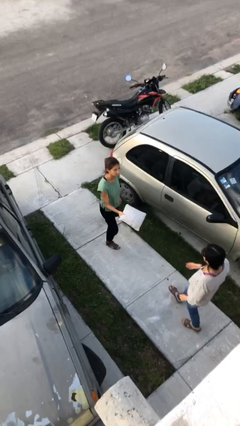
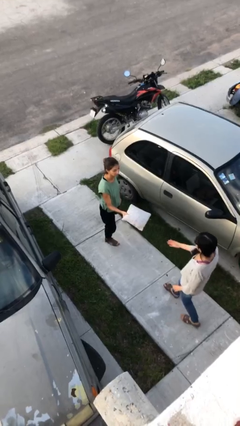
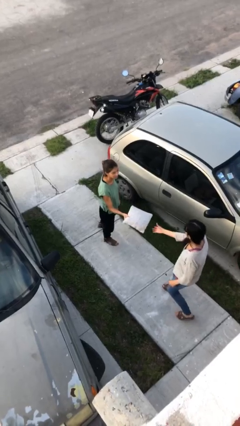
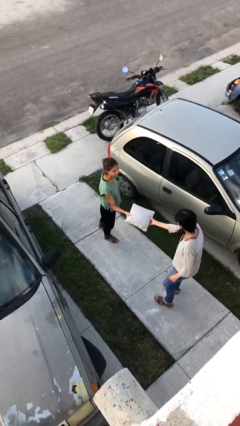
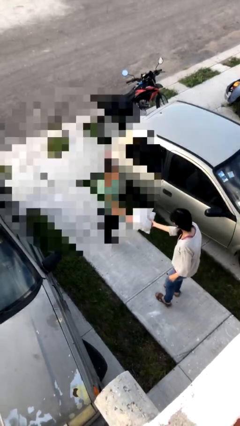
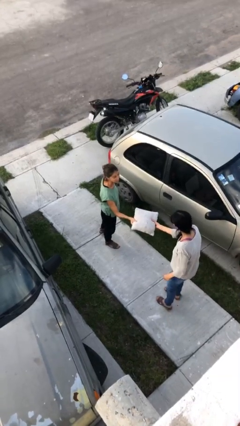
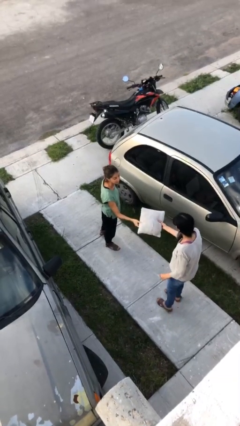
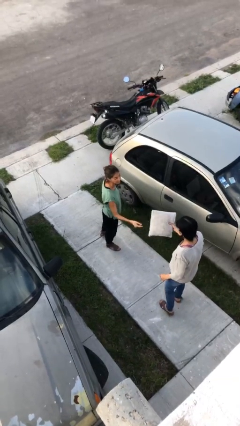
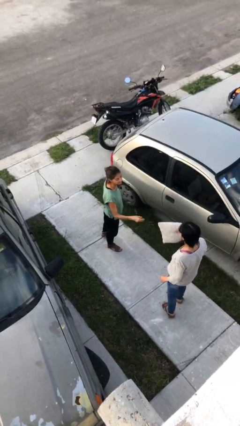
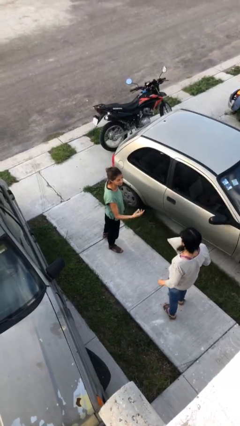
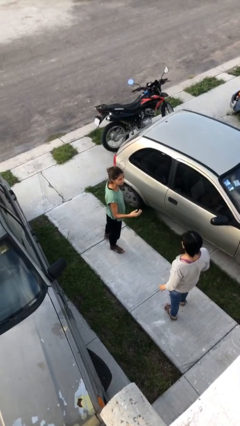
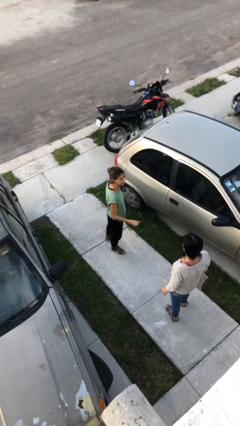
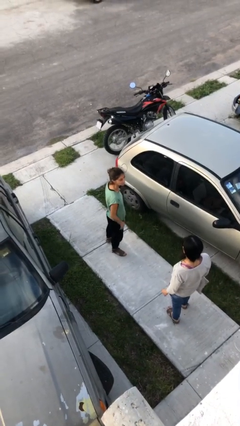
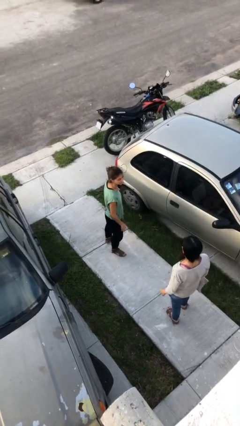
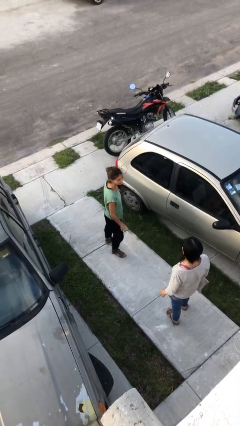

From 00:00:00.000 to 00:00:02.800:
person transfers object to person

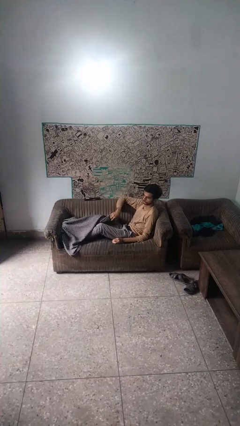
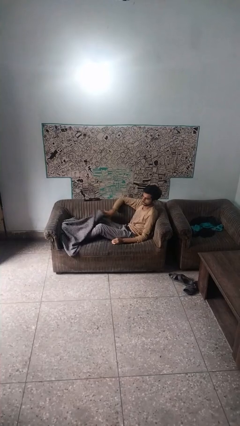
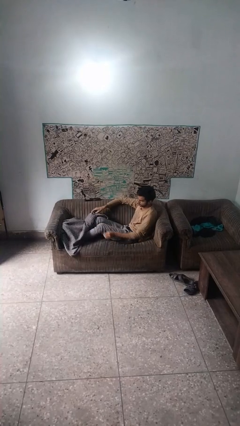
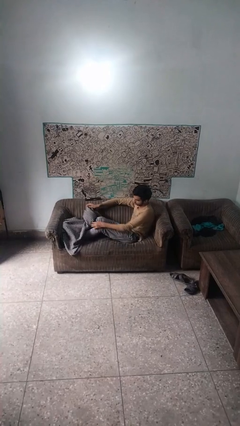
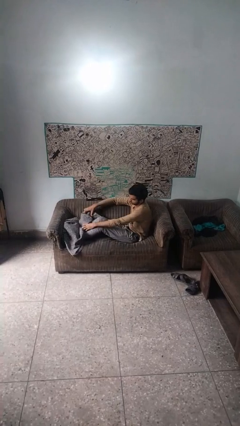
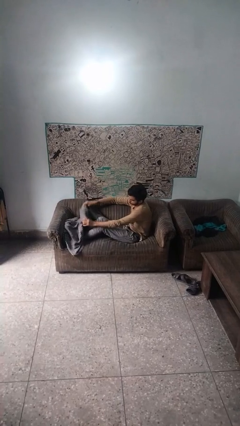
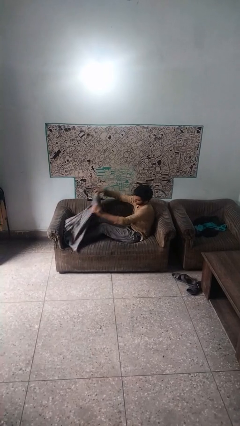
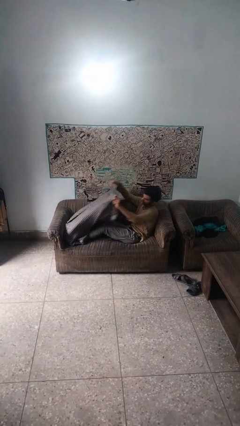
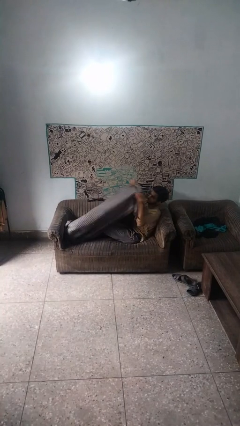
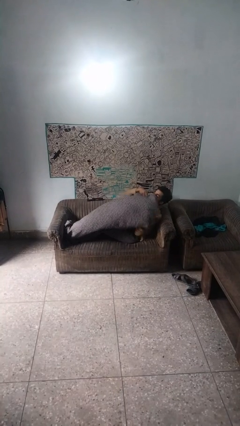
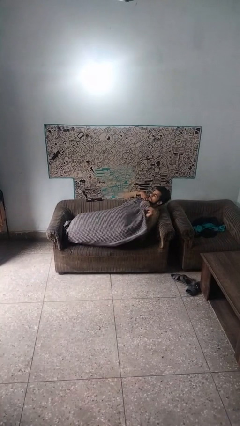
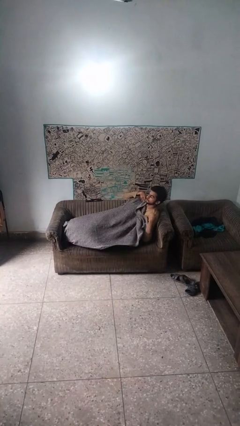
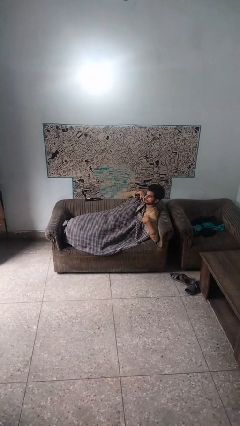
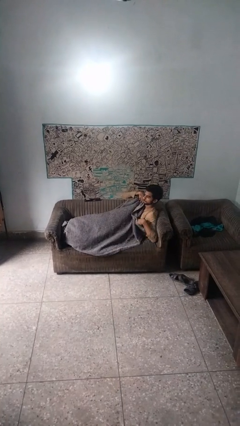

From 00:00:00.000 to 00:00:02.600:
person covers with blanket

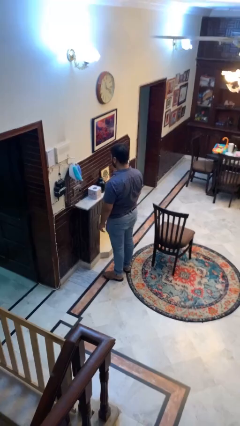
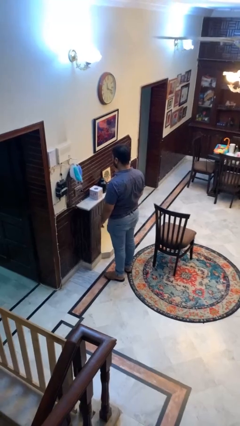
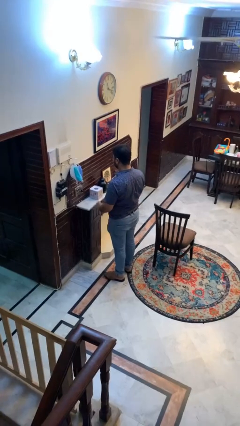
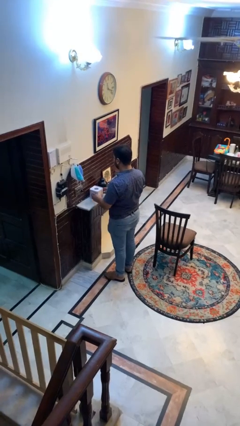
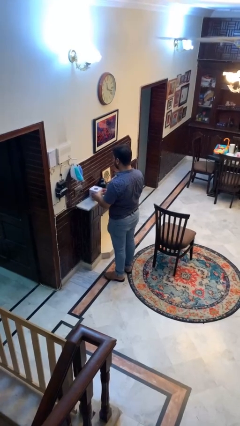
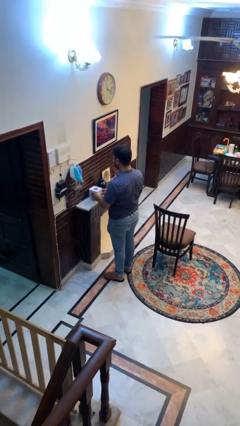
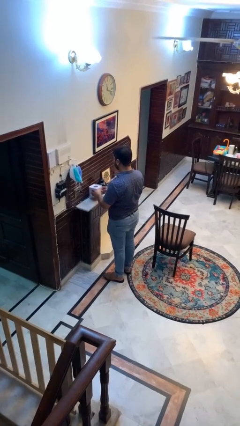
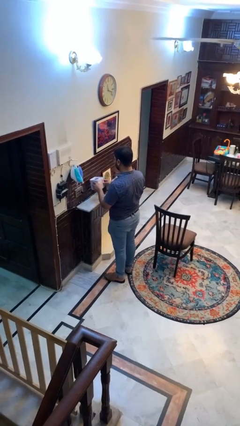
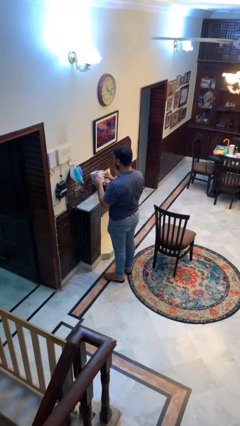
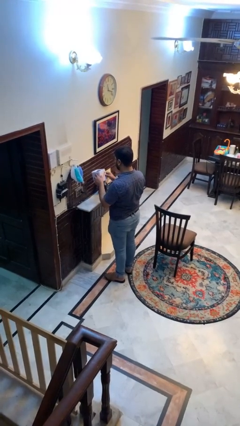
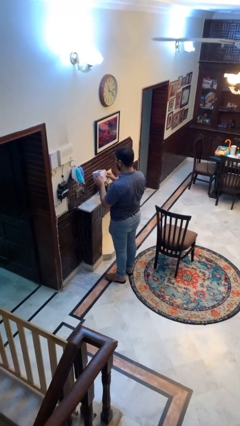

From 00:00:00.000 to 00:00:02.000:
person picks up object from countertop

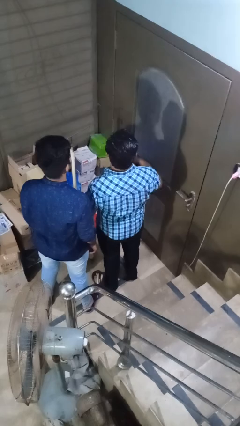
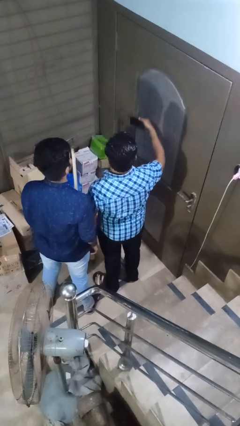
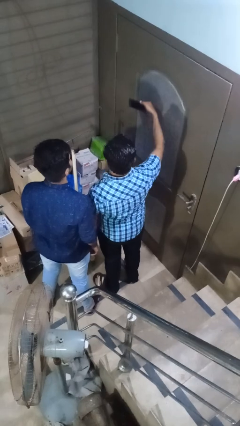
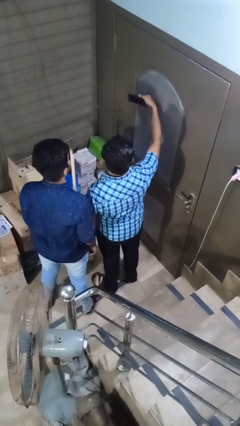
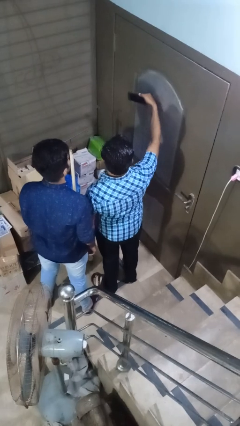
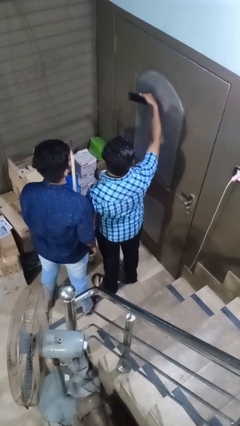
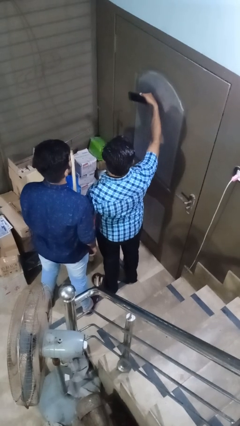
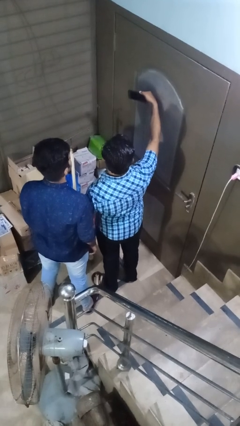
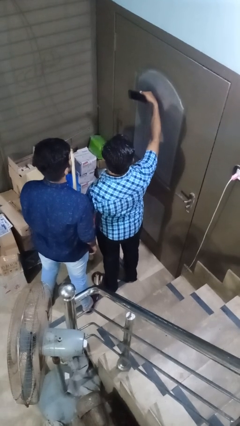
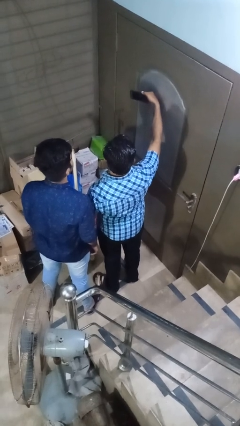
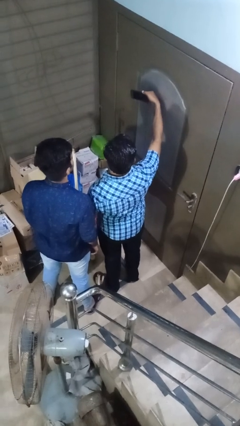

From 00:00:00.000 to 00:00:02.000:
person takes selfie with person

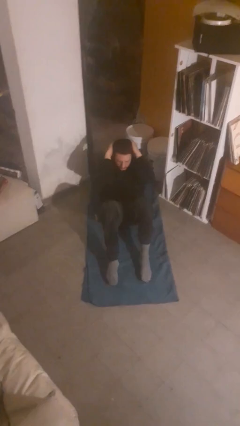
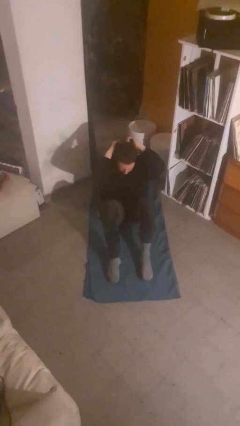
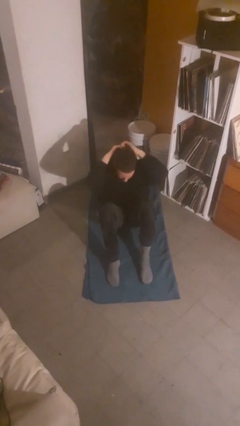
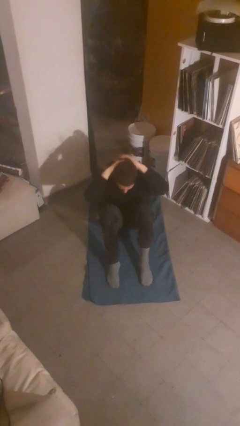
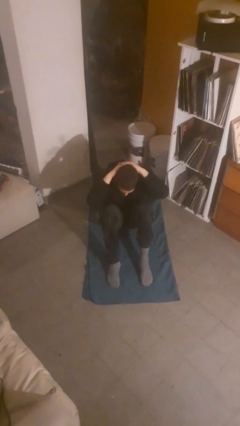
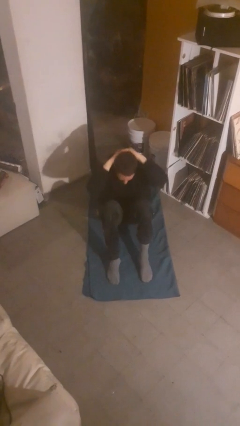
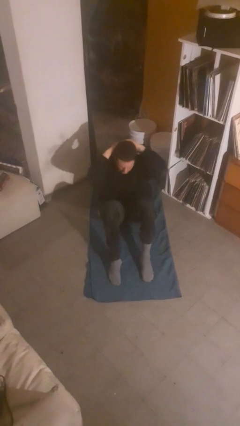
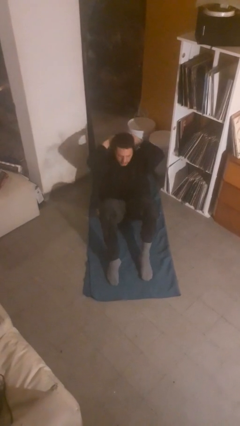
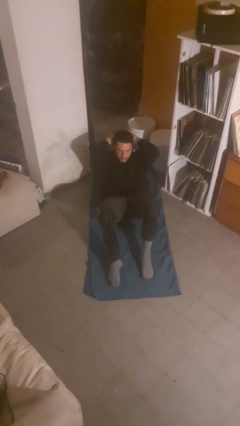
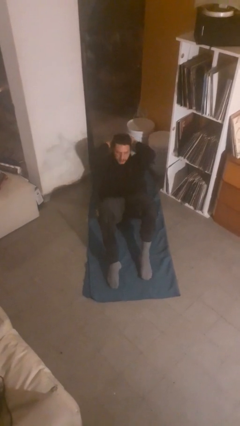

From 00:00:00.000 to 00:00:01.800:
person exercises with situp

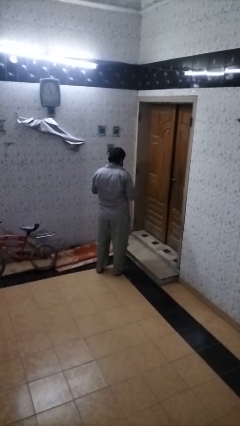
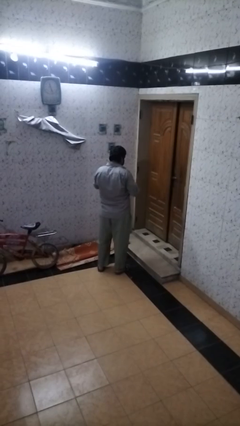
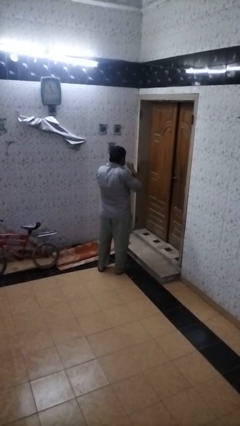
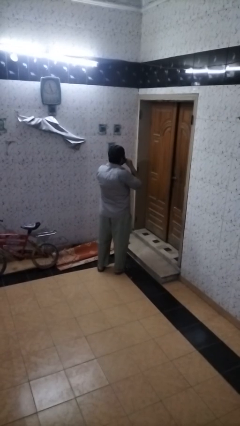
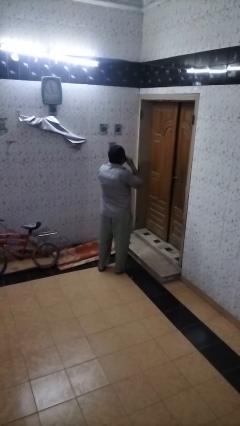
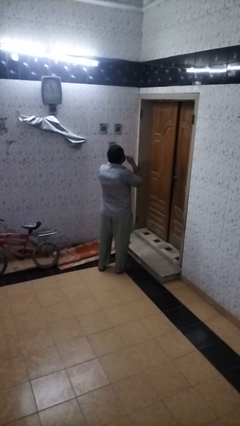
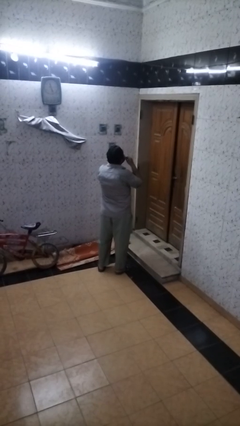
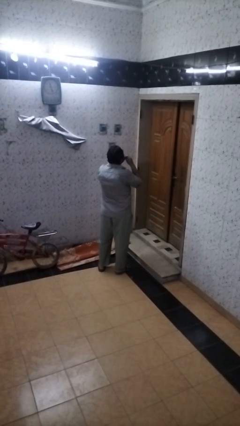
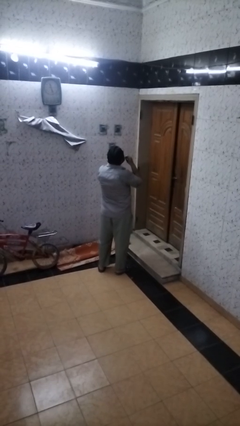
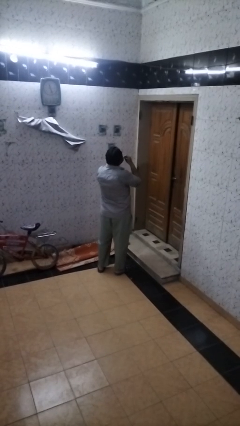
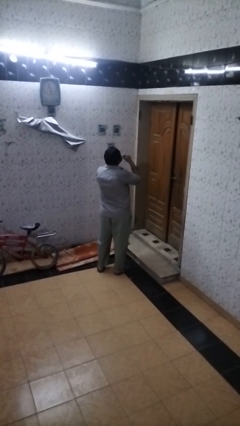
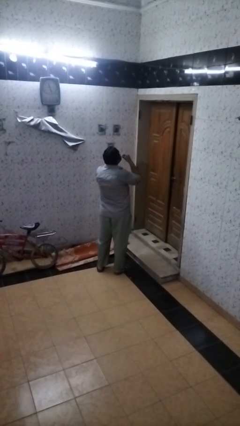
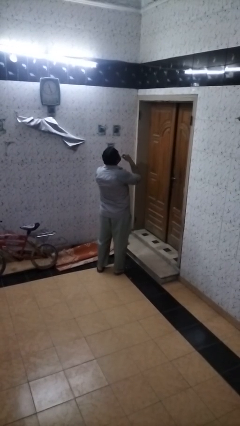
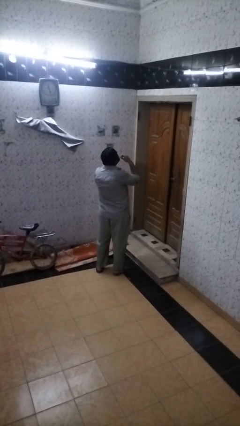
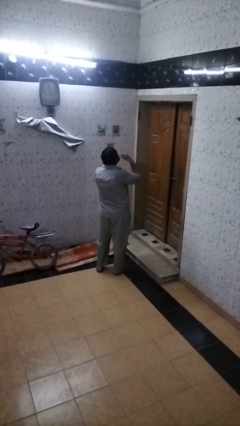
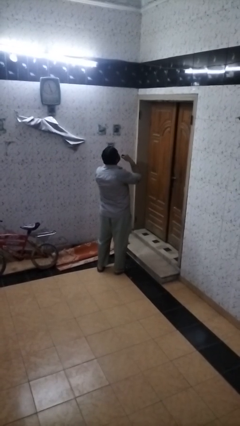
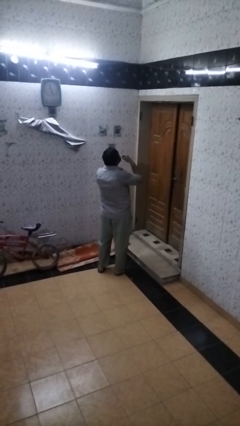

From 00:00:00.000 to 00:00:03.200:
person flosses

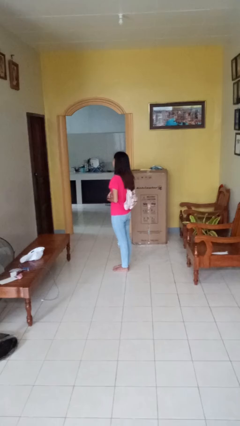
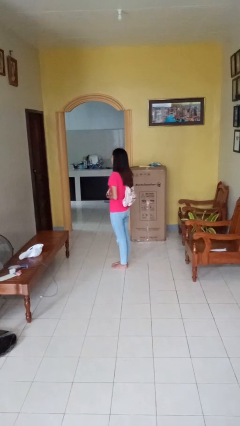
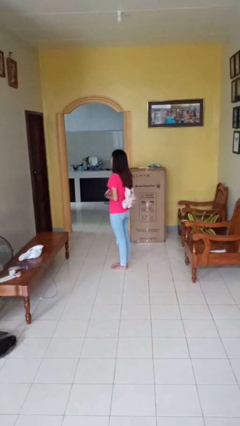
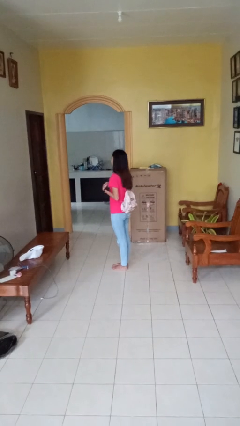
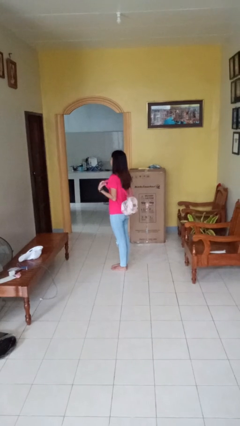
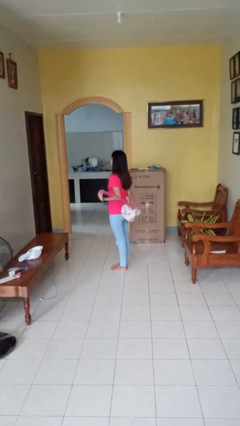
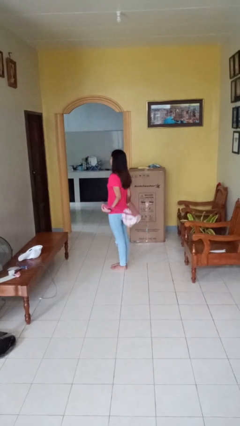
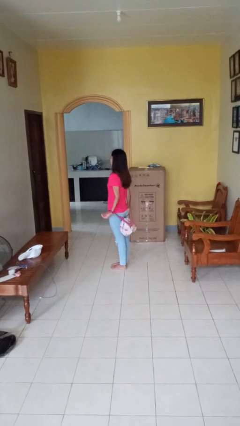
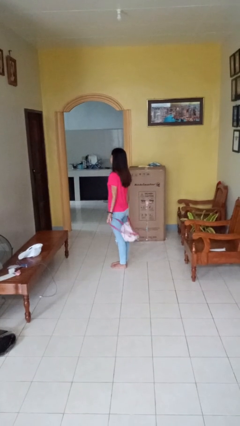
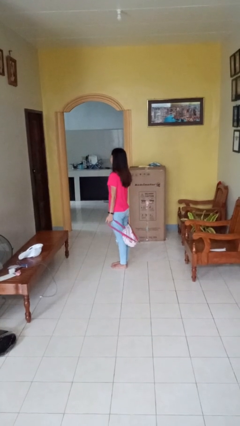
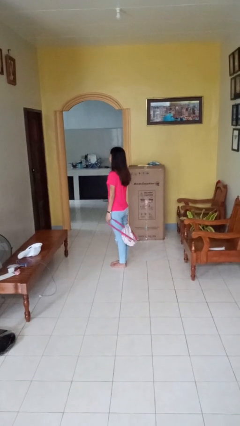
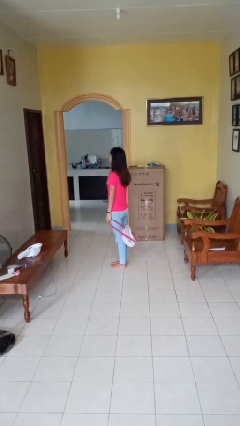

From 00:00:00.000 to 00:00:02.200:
person takes off backpack

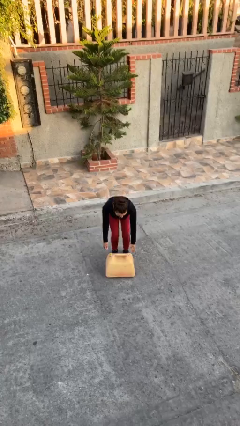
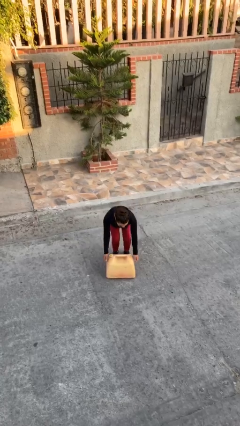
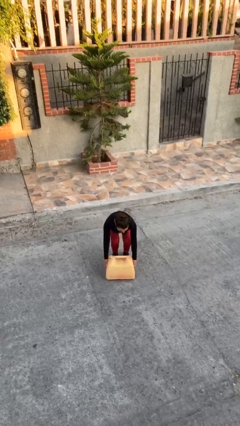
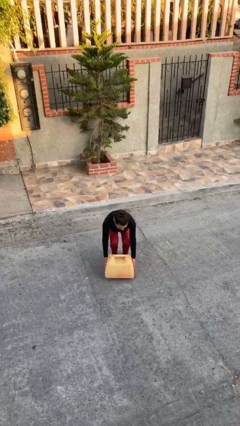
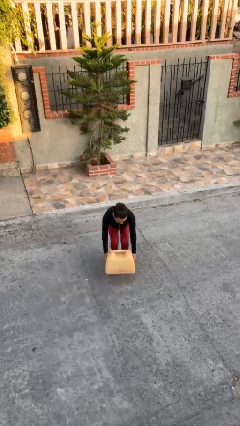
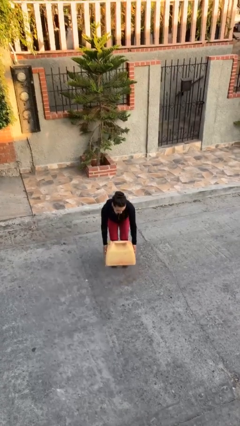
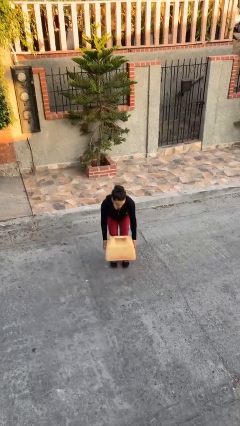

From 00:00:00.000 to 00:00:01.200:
person picks up object from floor
